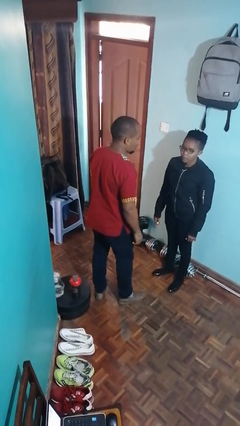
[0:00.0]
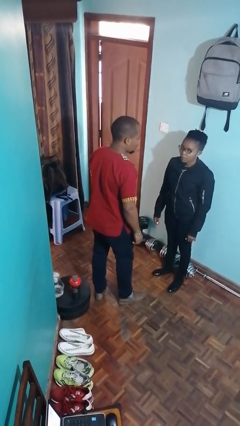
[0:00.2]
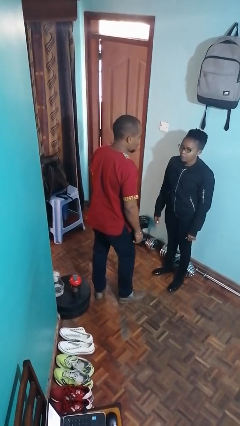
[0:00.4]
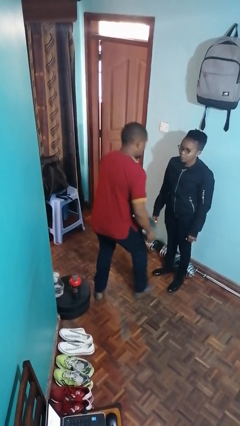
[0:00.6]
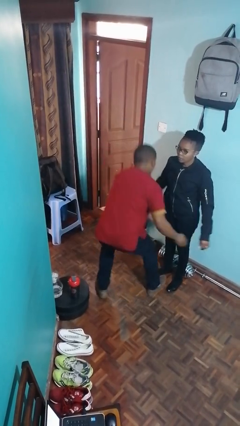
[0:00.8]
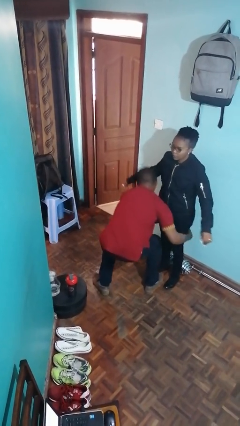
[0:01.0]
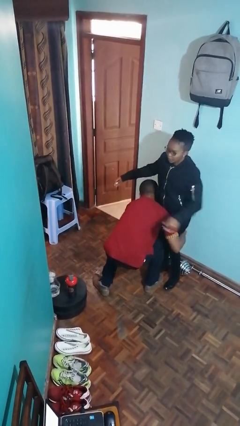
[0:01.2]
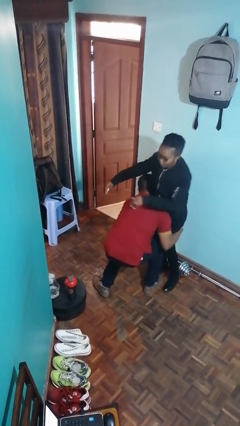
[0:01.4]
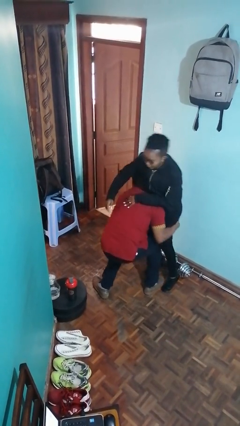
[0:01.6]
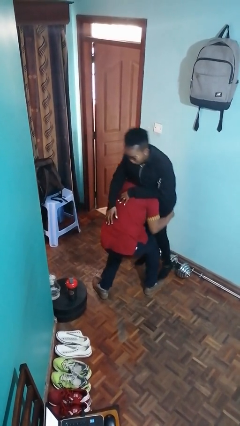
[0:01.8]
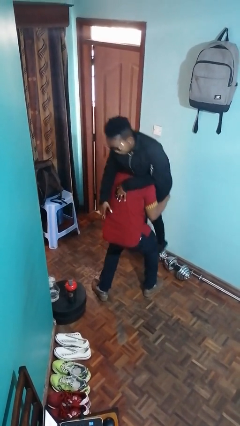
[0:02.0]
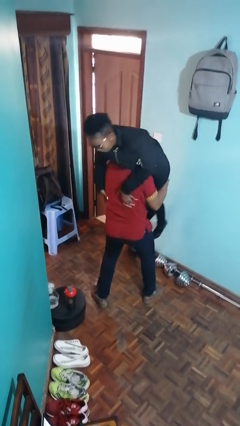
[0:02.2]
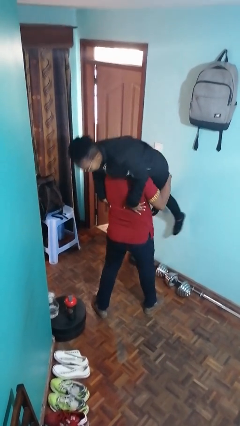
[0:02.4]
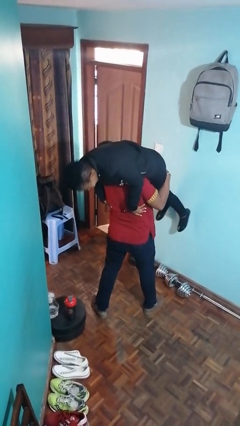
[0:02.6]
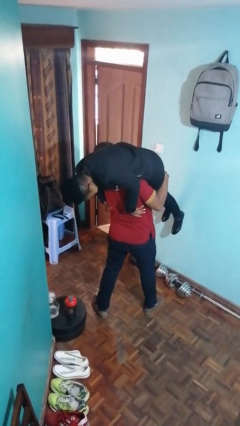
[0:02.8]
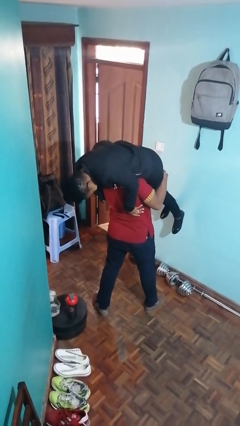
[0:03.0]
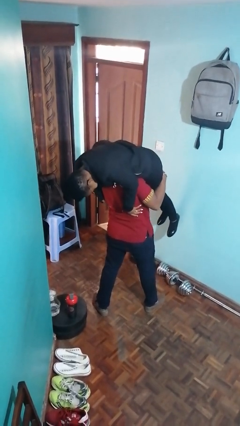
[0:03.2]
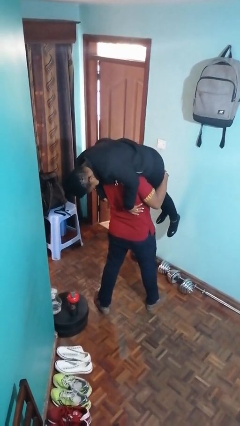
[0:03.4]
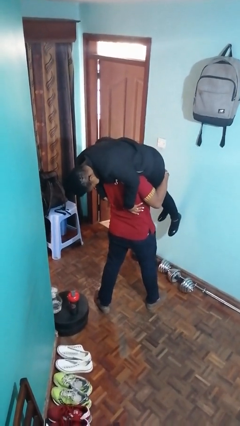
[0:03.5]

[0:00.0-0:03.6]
person carries person over shoulder

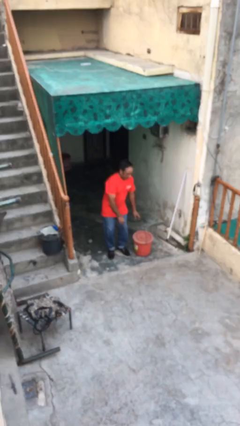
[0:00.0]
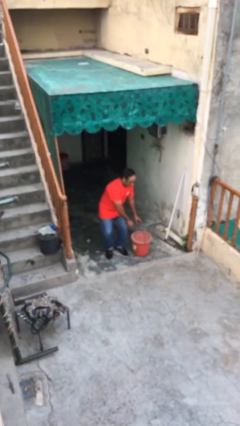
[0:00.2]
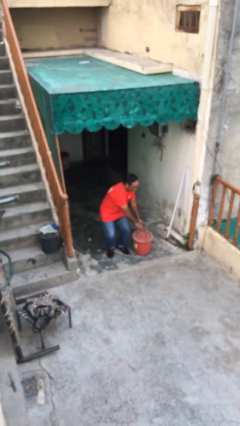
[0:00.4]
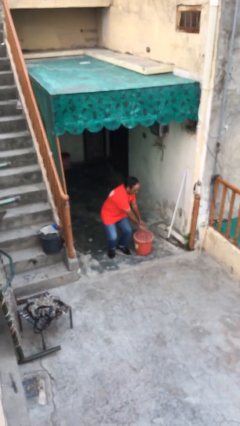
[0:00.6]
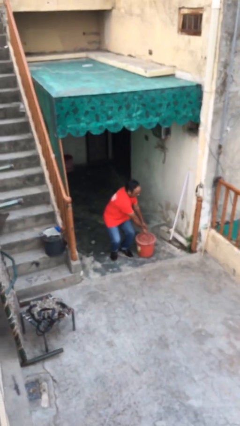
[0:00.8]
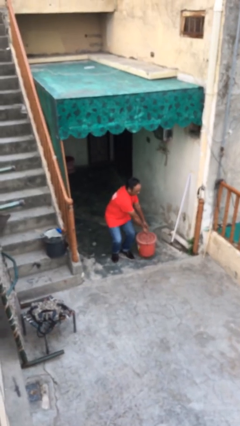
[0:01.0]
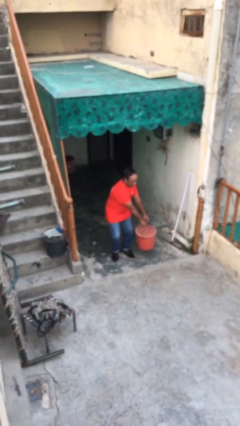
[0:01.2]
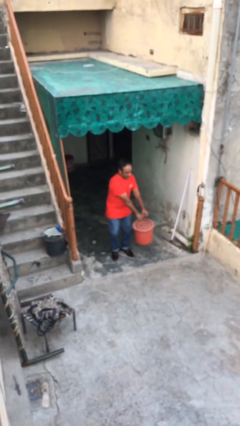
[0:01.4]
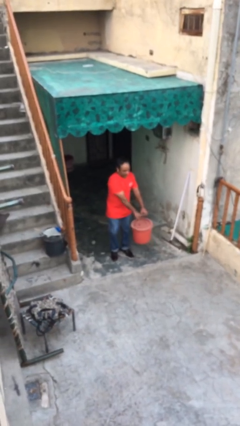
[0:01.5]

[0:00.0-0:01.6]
person picks up object from floor

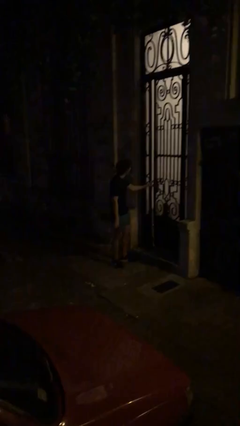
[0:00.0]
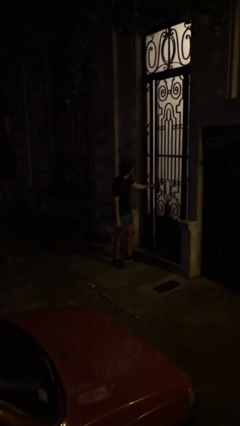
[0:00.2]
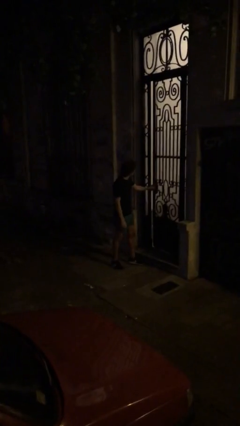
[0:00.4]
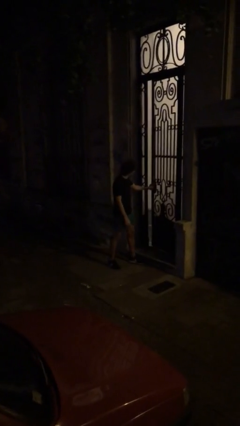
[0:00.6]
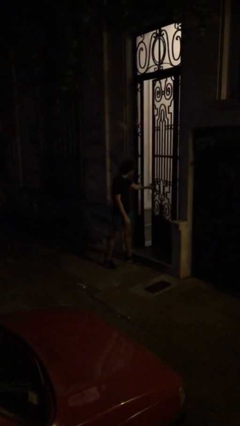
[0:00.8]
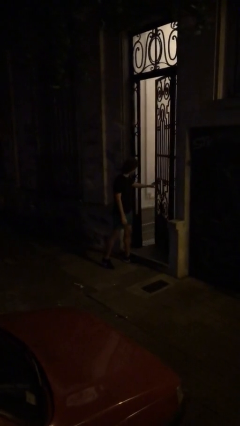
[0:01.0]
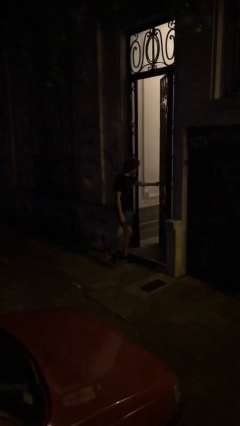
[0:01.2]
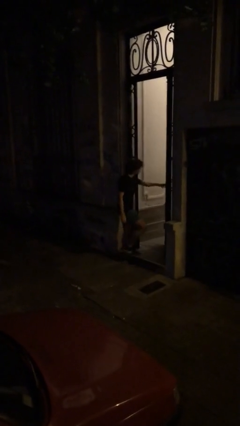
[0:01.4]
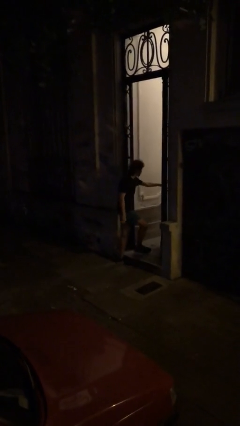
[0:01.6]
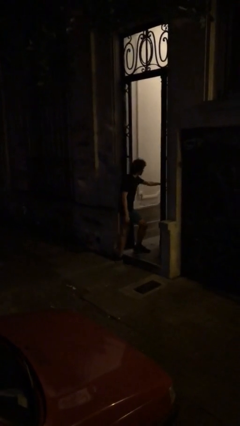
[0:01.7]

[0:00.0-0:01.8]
person opens facility door

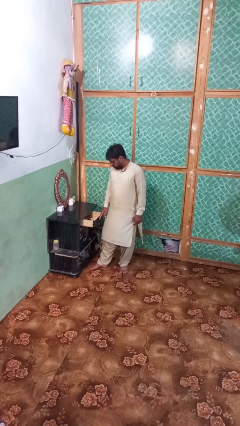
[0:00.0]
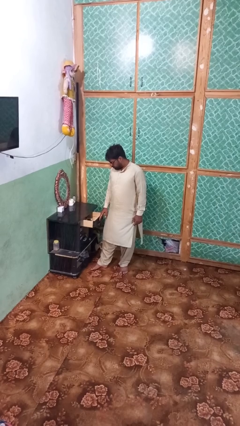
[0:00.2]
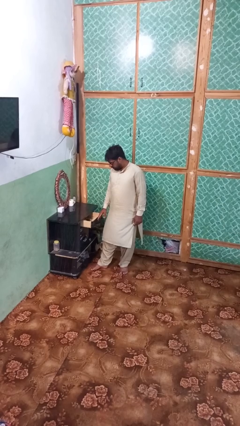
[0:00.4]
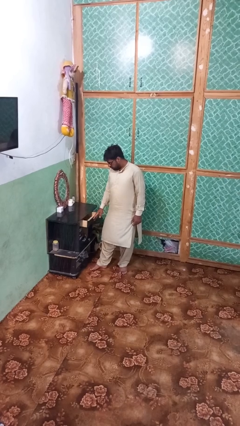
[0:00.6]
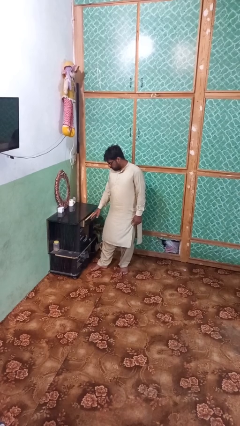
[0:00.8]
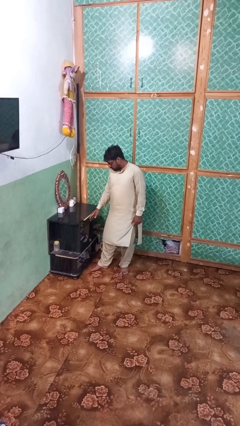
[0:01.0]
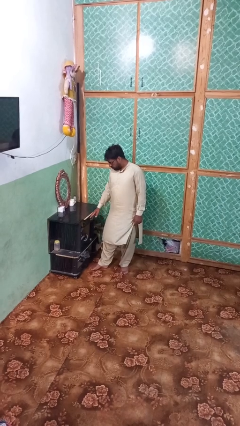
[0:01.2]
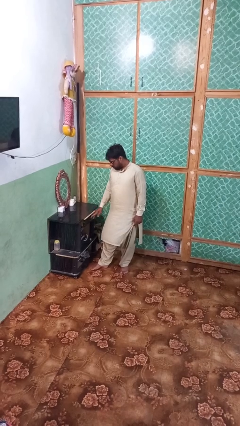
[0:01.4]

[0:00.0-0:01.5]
person closes dresser drawer

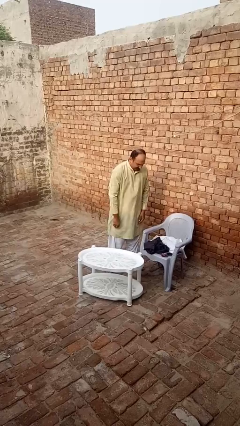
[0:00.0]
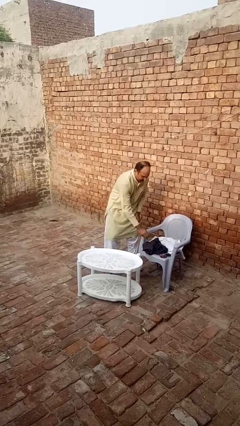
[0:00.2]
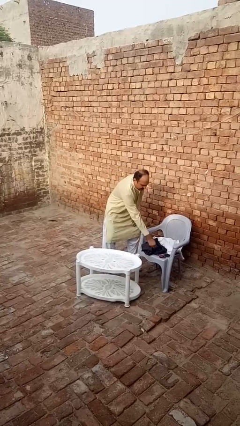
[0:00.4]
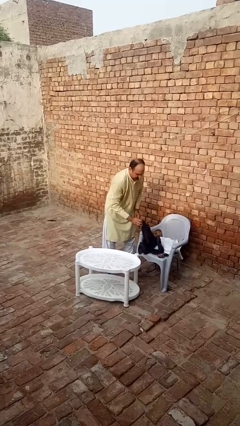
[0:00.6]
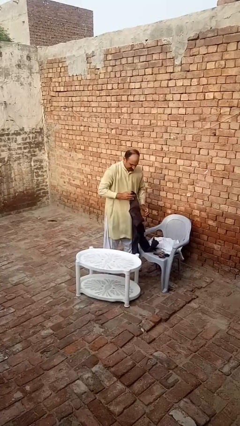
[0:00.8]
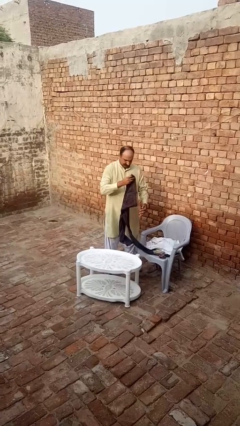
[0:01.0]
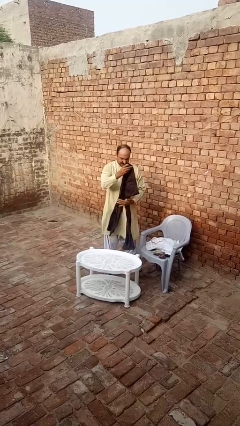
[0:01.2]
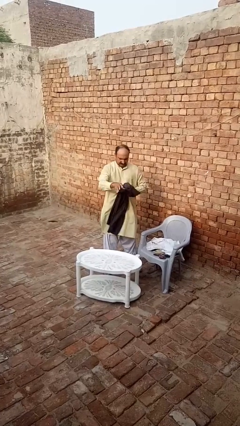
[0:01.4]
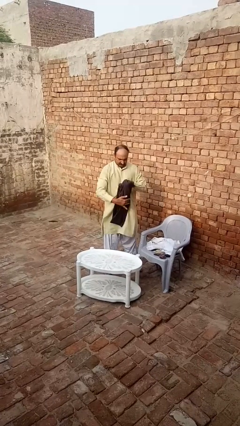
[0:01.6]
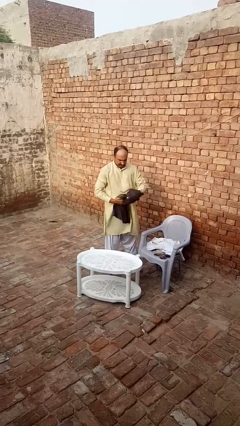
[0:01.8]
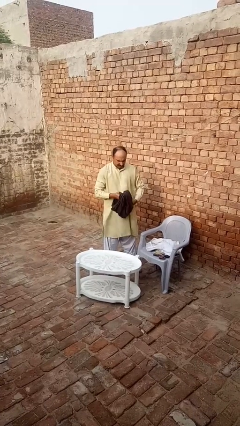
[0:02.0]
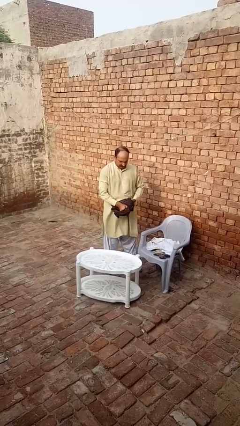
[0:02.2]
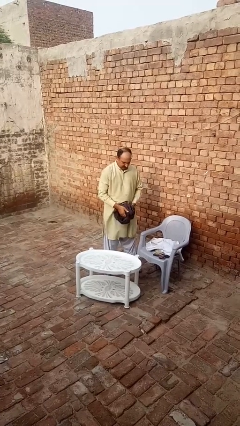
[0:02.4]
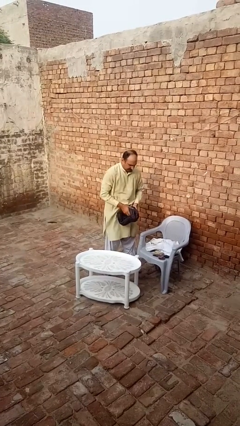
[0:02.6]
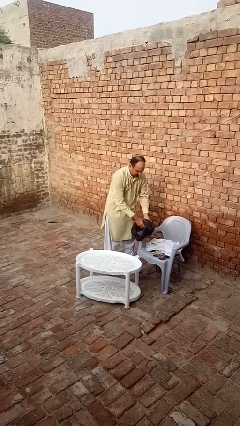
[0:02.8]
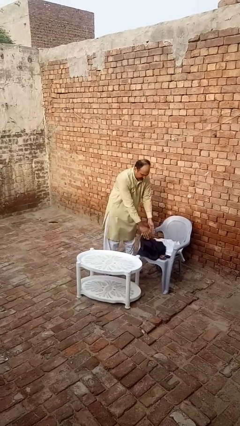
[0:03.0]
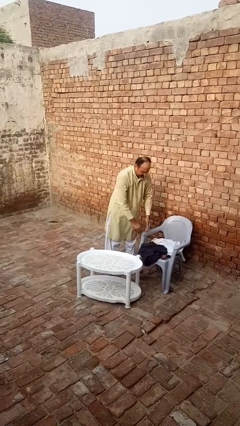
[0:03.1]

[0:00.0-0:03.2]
person folds pants

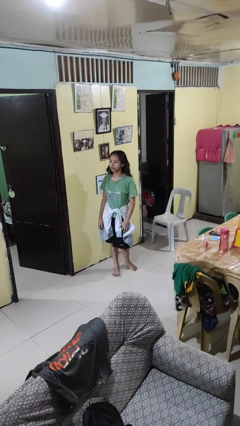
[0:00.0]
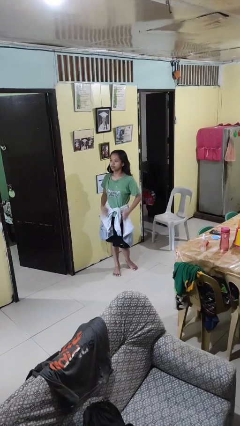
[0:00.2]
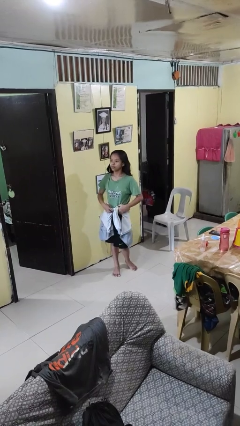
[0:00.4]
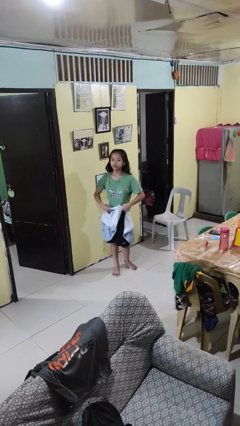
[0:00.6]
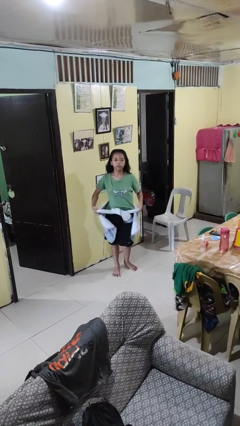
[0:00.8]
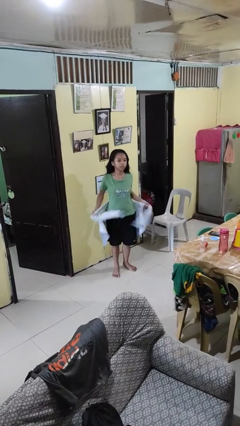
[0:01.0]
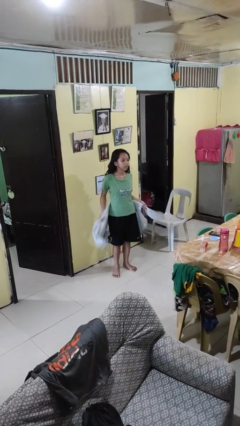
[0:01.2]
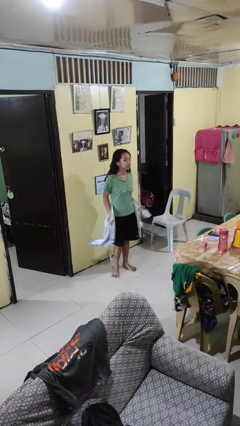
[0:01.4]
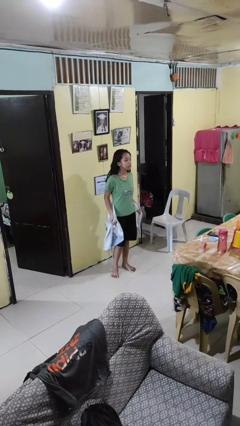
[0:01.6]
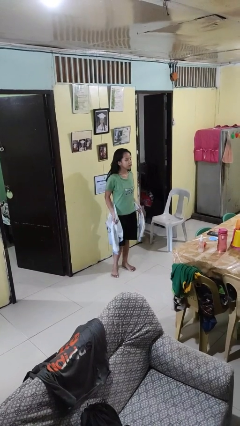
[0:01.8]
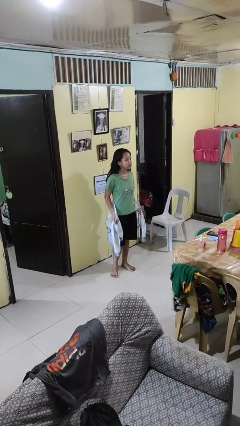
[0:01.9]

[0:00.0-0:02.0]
person unties jacket around waist

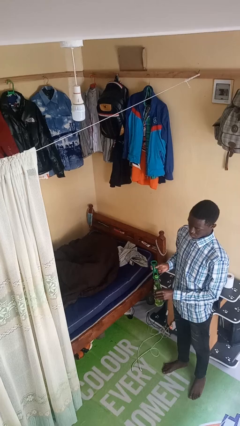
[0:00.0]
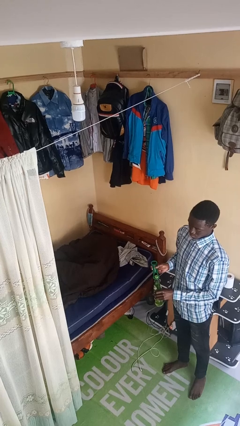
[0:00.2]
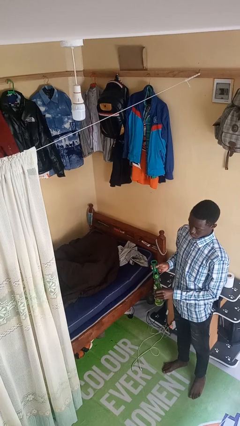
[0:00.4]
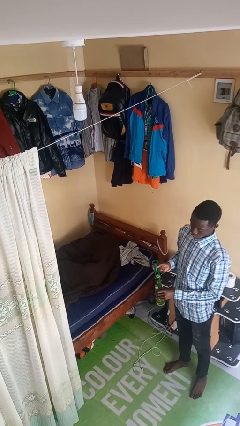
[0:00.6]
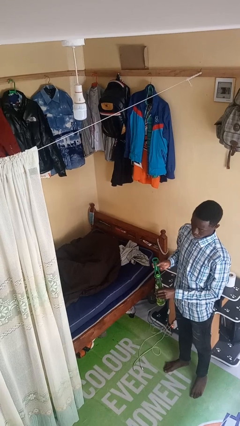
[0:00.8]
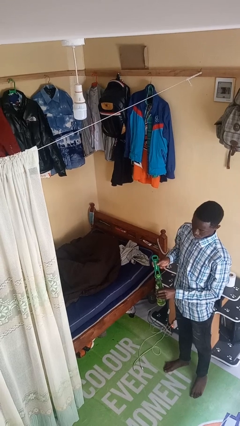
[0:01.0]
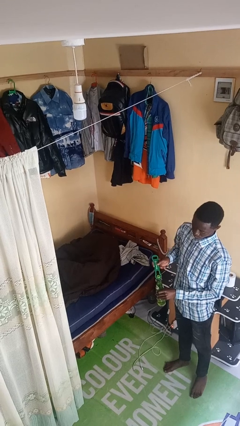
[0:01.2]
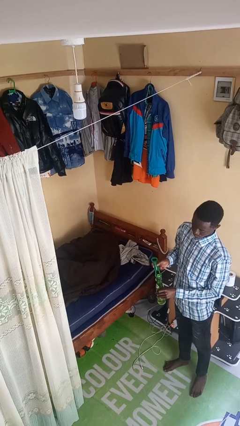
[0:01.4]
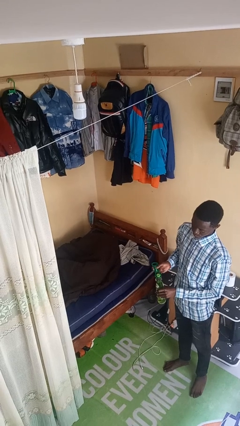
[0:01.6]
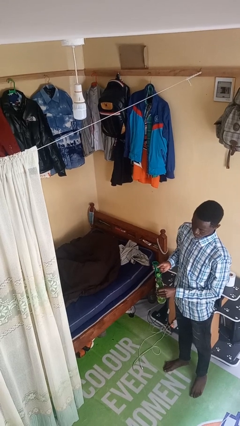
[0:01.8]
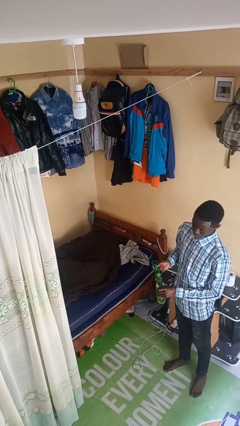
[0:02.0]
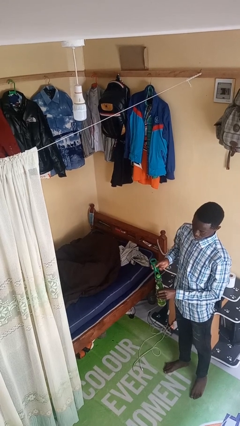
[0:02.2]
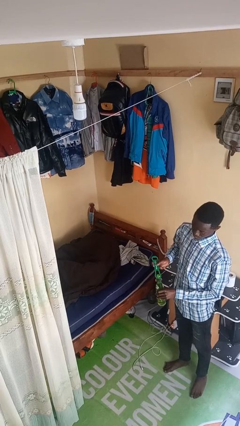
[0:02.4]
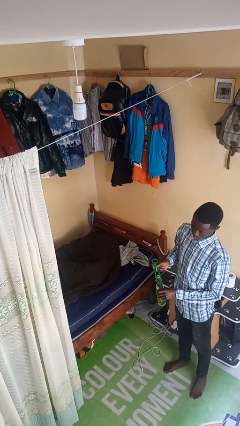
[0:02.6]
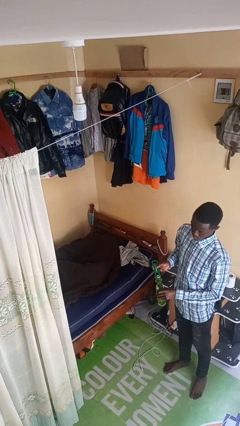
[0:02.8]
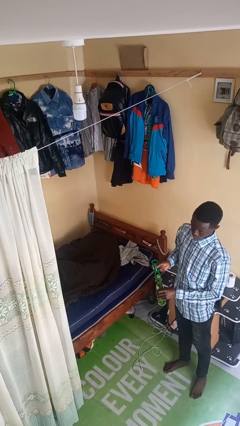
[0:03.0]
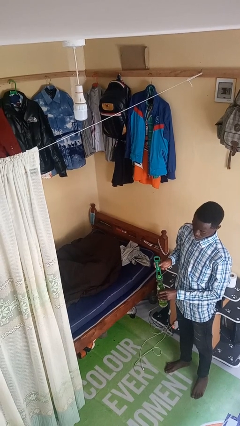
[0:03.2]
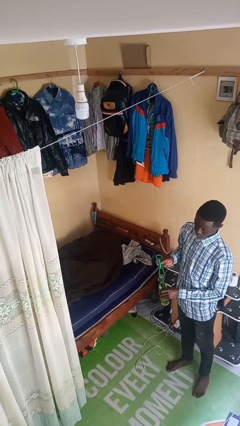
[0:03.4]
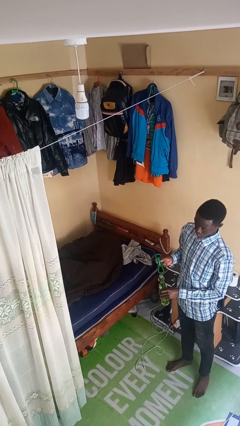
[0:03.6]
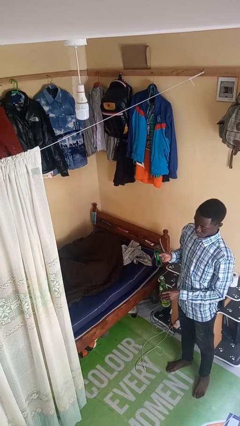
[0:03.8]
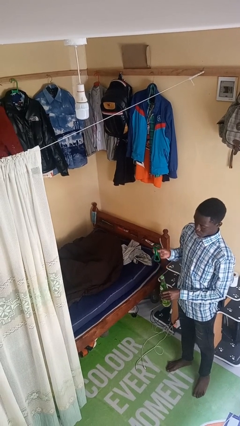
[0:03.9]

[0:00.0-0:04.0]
person opens can with can opener
